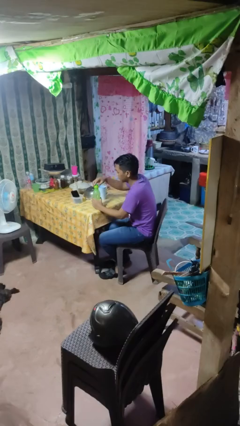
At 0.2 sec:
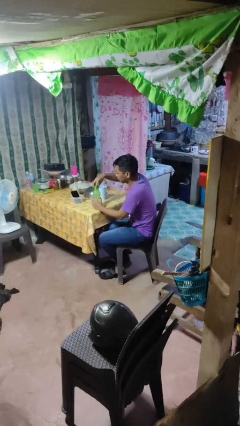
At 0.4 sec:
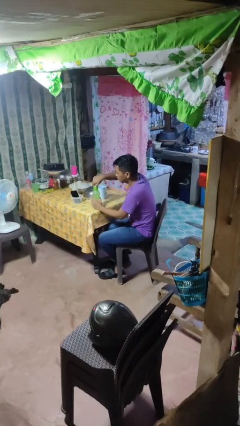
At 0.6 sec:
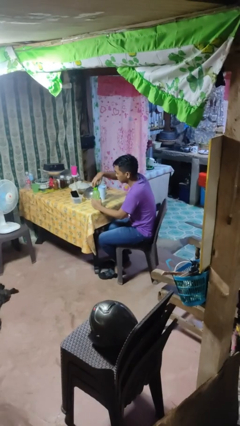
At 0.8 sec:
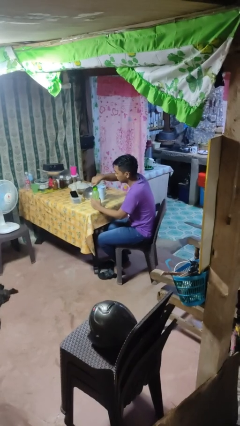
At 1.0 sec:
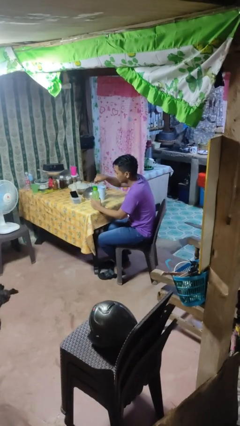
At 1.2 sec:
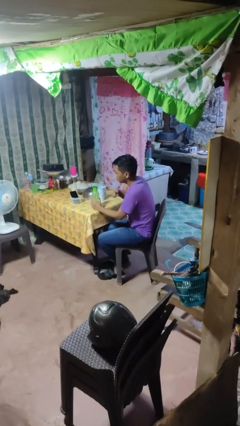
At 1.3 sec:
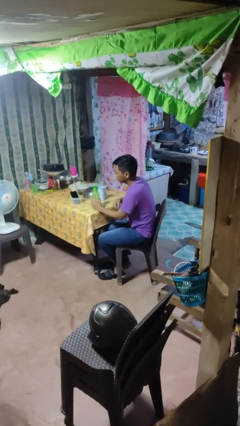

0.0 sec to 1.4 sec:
person screws lid to bottle

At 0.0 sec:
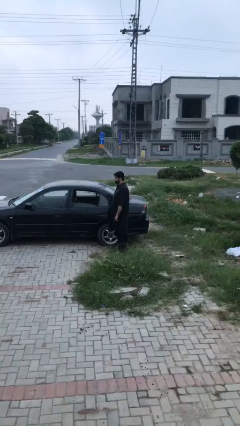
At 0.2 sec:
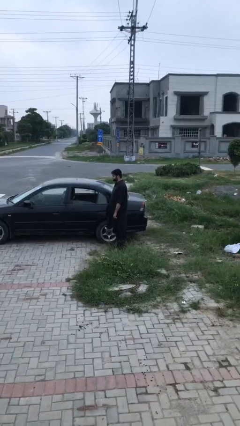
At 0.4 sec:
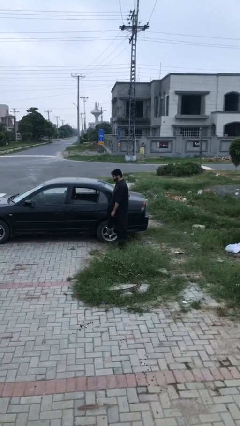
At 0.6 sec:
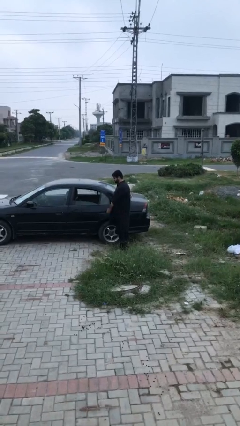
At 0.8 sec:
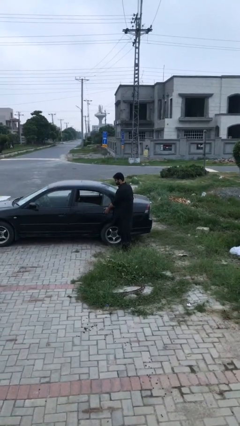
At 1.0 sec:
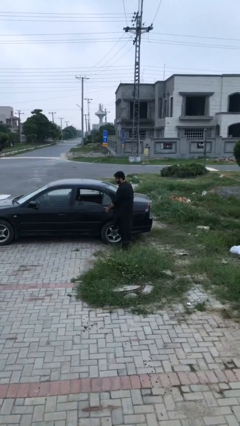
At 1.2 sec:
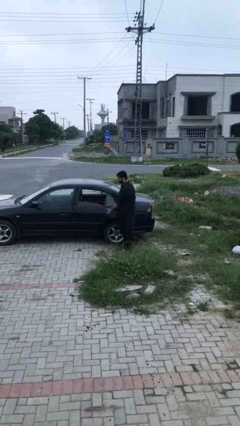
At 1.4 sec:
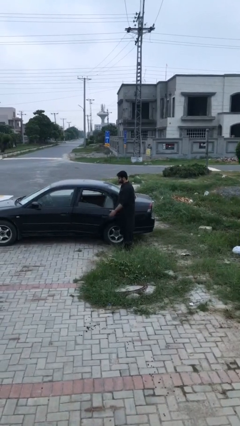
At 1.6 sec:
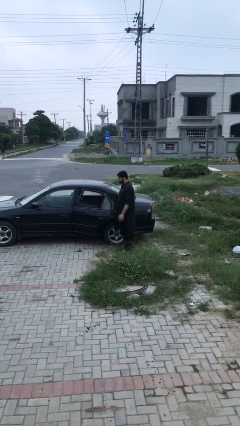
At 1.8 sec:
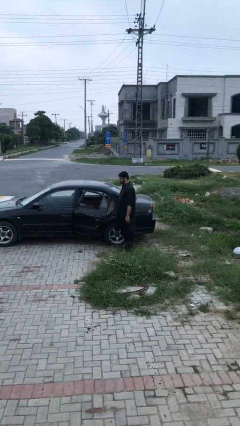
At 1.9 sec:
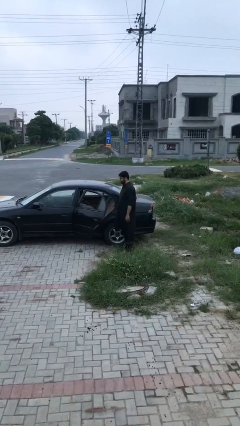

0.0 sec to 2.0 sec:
person opens car door

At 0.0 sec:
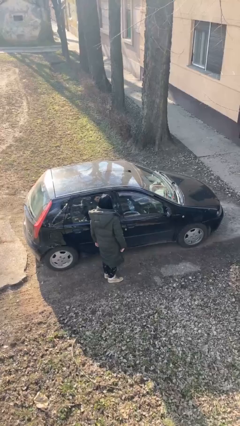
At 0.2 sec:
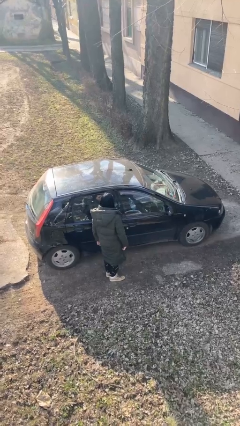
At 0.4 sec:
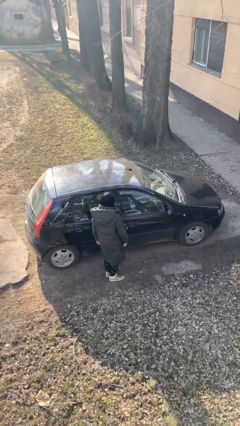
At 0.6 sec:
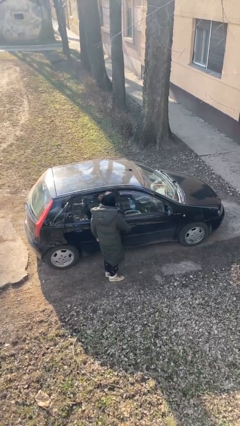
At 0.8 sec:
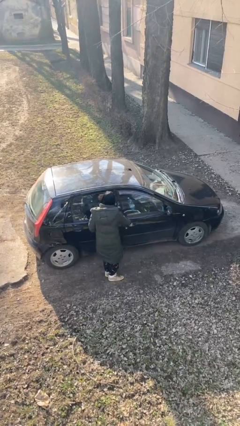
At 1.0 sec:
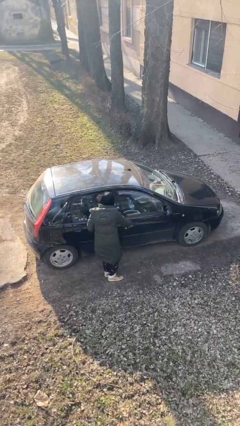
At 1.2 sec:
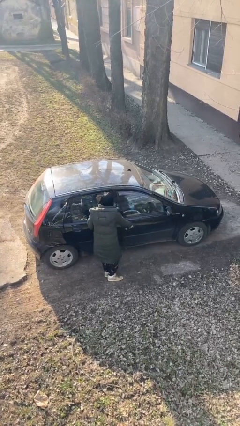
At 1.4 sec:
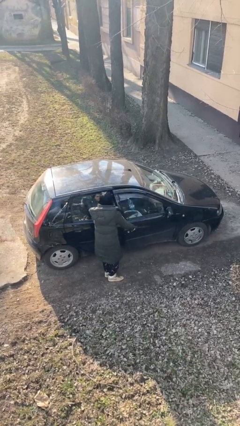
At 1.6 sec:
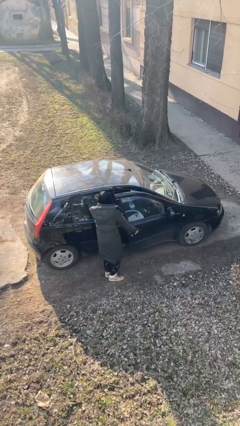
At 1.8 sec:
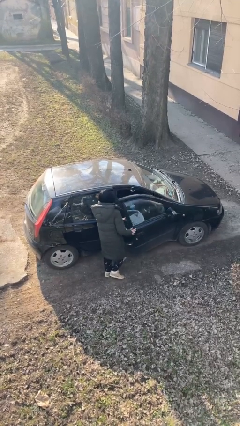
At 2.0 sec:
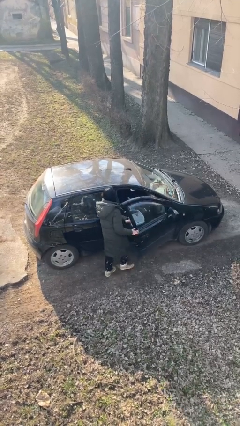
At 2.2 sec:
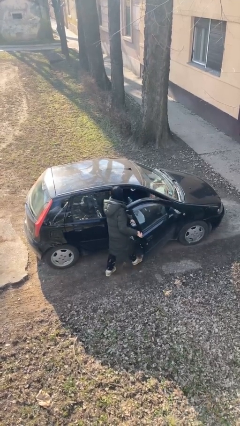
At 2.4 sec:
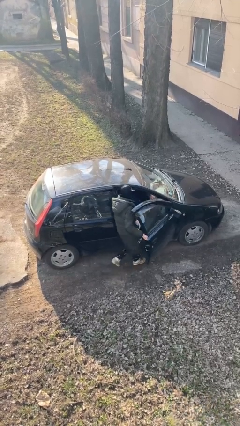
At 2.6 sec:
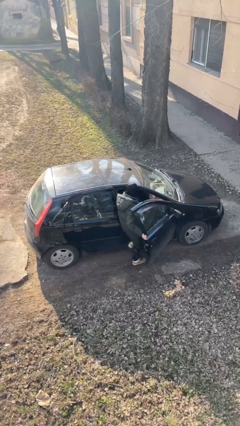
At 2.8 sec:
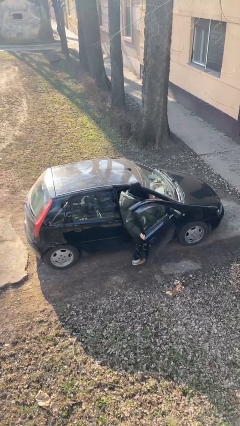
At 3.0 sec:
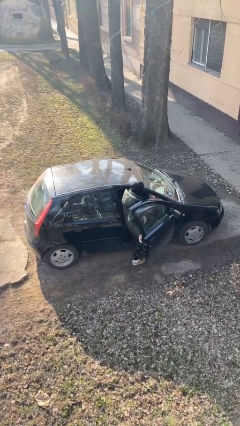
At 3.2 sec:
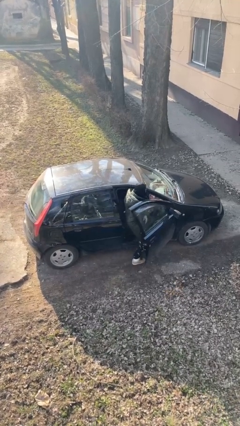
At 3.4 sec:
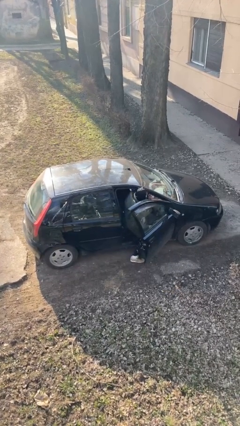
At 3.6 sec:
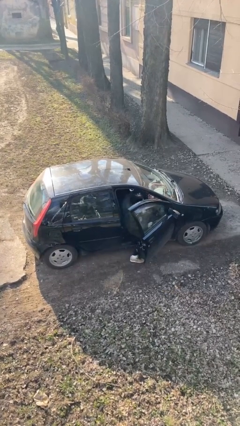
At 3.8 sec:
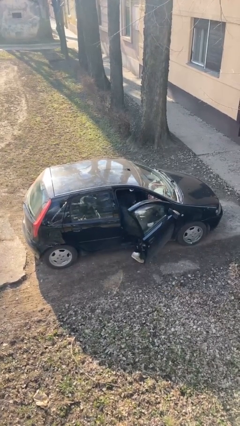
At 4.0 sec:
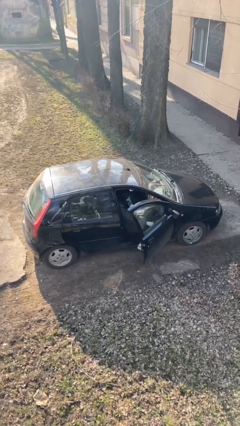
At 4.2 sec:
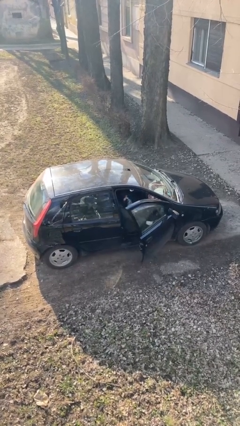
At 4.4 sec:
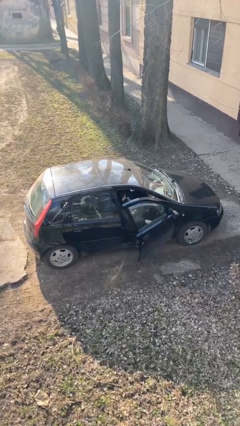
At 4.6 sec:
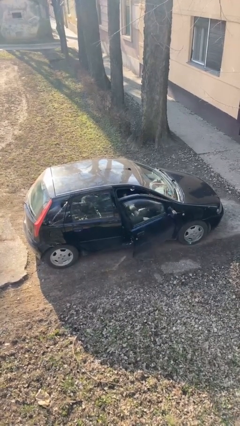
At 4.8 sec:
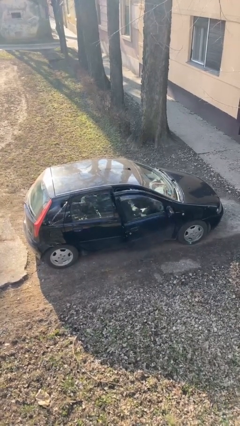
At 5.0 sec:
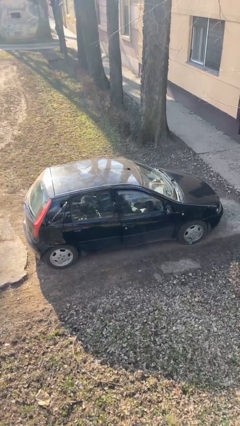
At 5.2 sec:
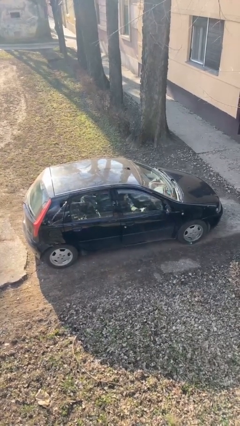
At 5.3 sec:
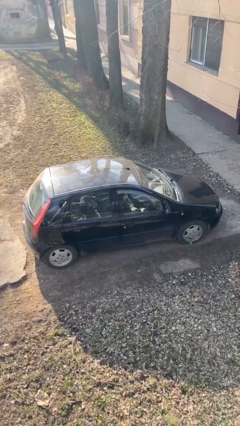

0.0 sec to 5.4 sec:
car picks up person

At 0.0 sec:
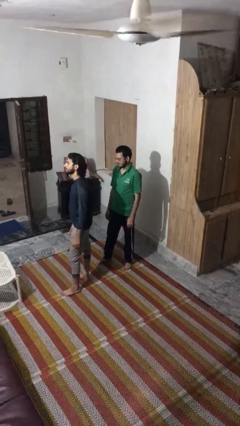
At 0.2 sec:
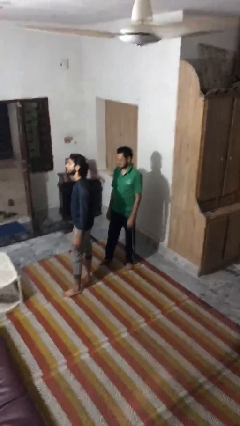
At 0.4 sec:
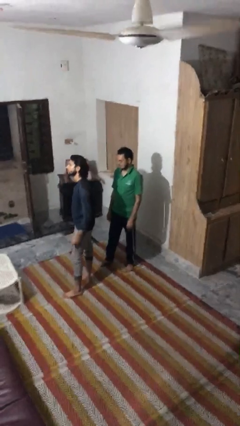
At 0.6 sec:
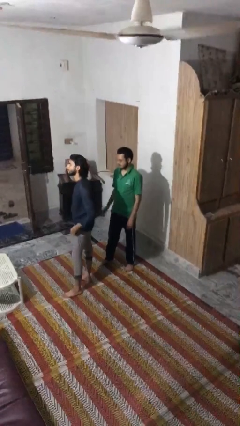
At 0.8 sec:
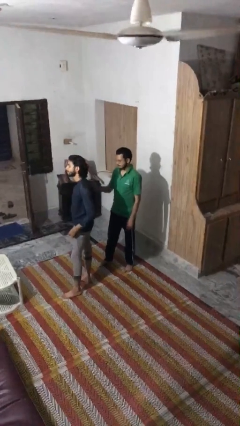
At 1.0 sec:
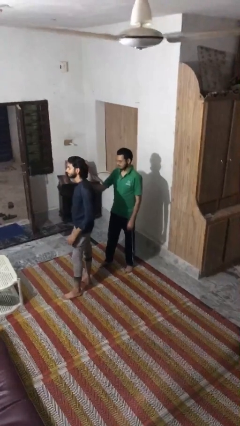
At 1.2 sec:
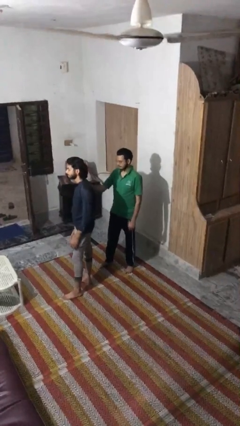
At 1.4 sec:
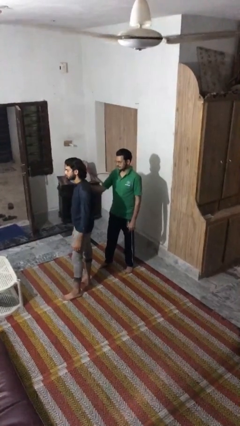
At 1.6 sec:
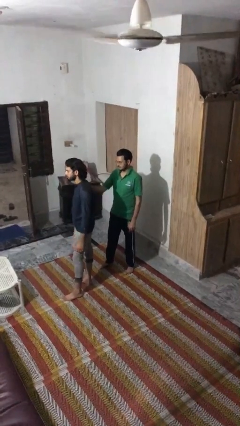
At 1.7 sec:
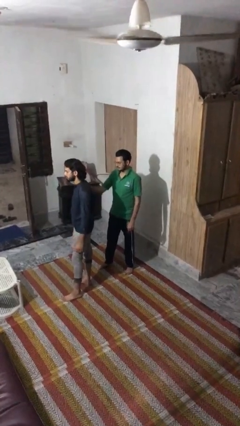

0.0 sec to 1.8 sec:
person grabs person by shoulder

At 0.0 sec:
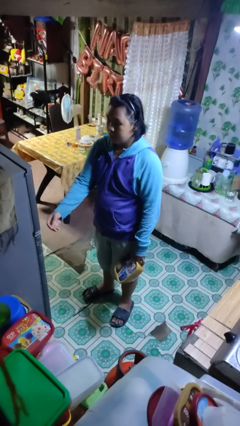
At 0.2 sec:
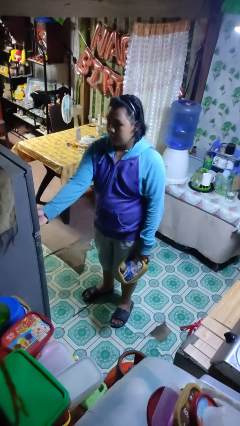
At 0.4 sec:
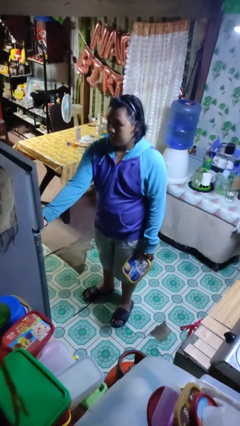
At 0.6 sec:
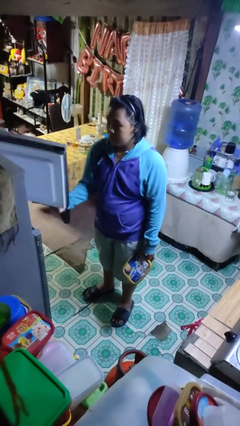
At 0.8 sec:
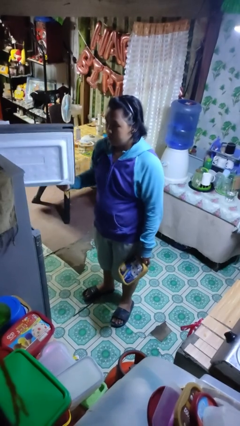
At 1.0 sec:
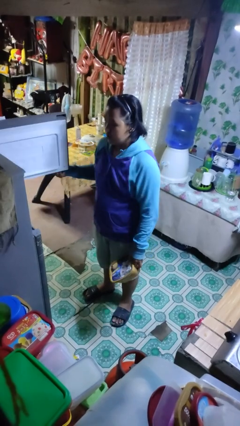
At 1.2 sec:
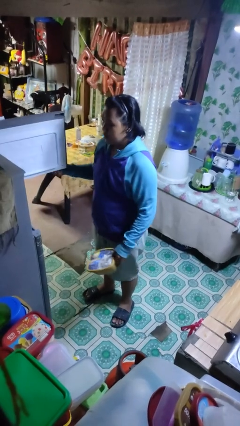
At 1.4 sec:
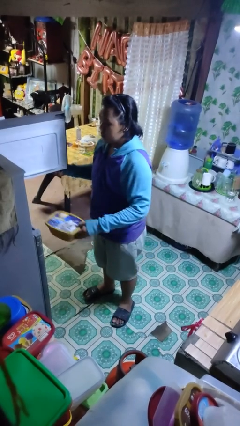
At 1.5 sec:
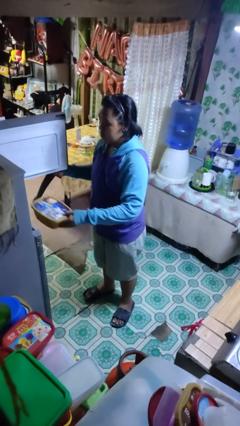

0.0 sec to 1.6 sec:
person opens refrigerator

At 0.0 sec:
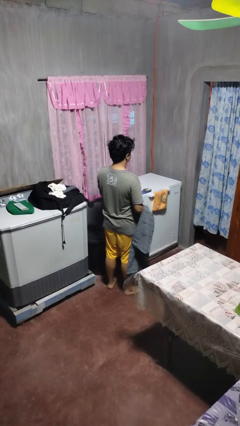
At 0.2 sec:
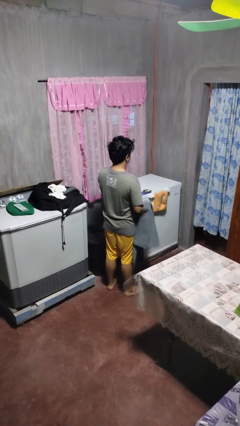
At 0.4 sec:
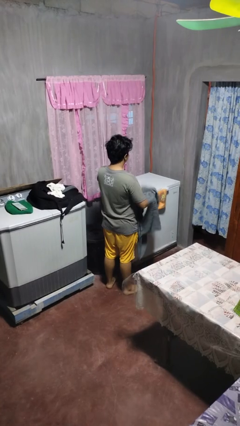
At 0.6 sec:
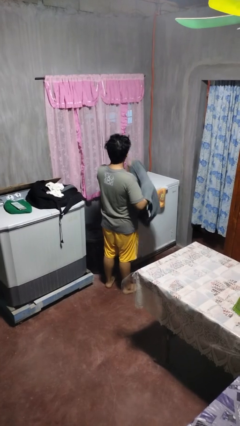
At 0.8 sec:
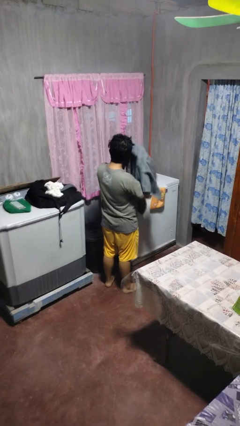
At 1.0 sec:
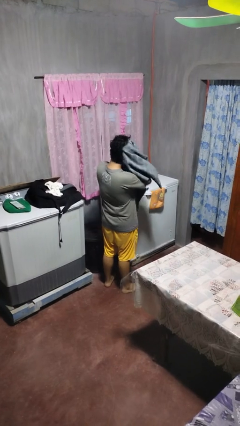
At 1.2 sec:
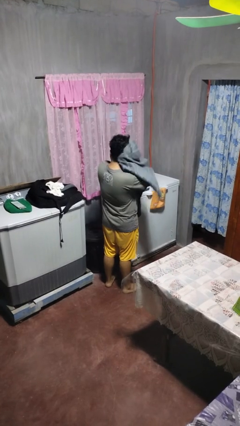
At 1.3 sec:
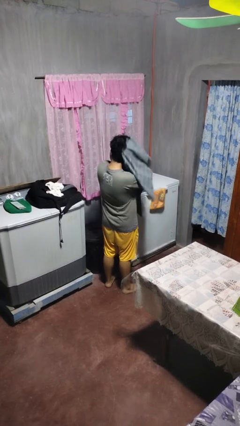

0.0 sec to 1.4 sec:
person dries hair with towel

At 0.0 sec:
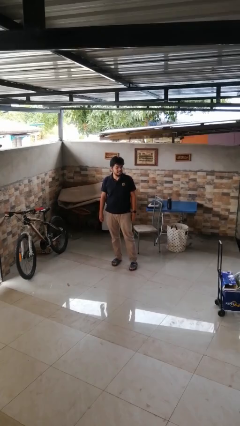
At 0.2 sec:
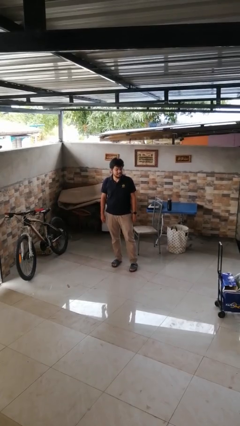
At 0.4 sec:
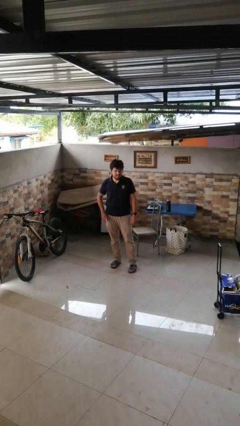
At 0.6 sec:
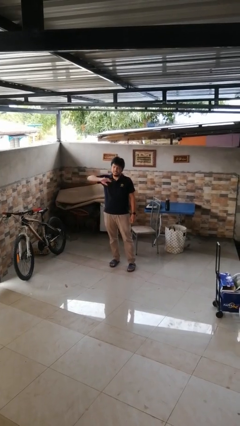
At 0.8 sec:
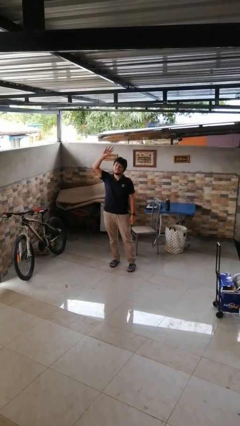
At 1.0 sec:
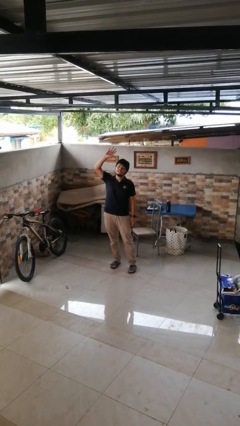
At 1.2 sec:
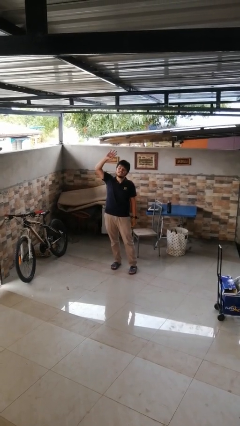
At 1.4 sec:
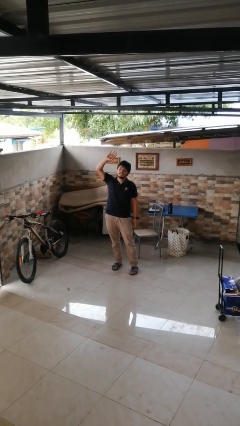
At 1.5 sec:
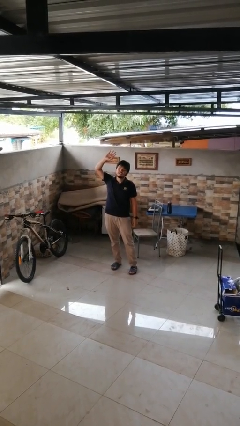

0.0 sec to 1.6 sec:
person gestures swipe up

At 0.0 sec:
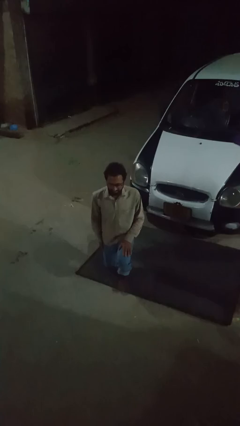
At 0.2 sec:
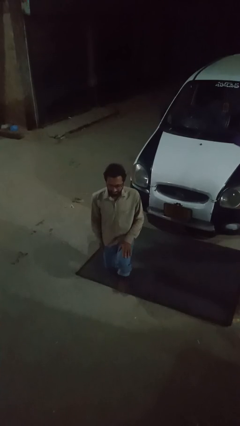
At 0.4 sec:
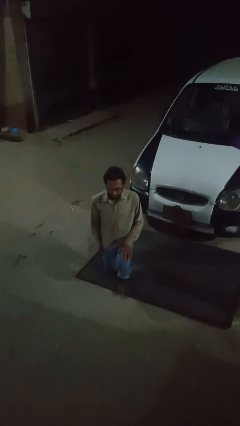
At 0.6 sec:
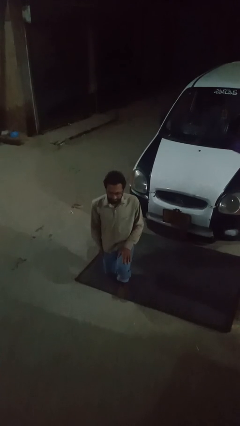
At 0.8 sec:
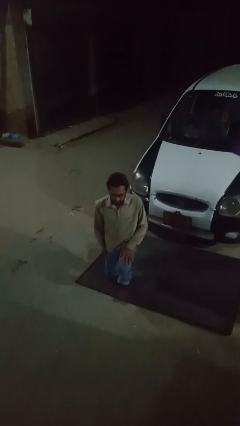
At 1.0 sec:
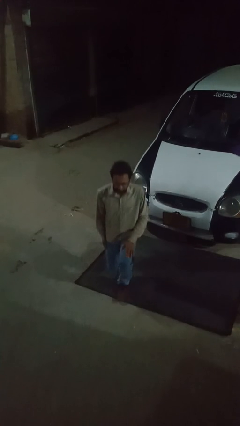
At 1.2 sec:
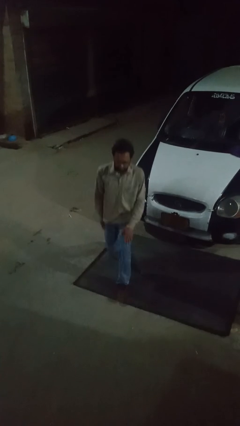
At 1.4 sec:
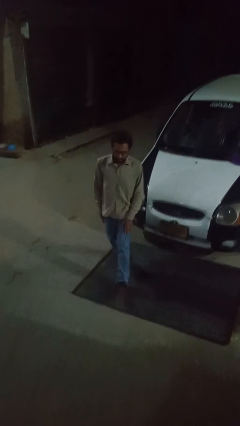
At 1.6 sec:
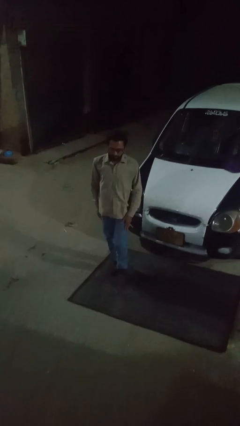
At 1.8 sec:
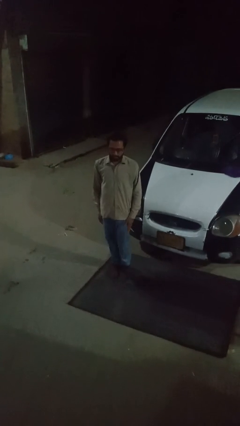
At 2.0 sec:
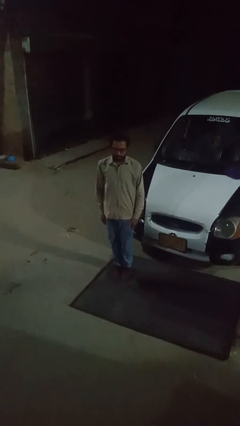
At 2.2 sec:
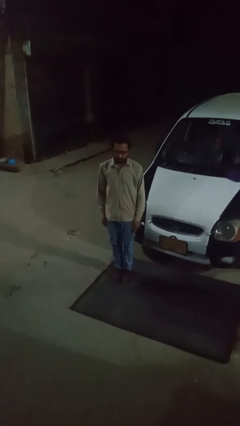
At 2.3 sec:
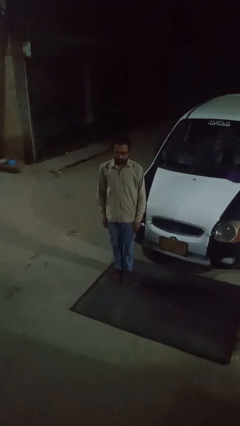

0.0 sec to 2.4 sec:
person stands up
